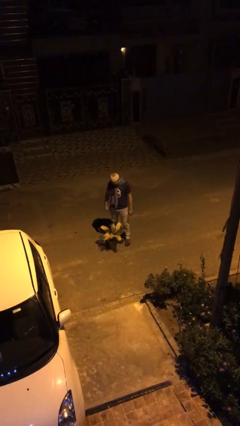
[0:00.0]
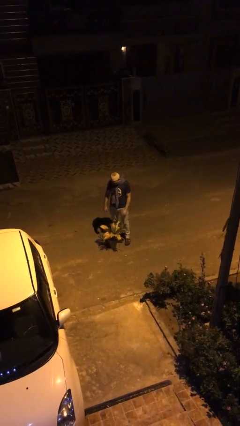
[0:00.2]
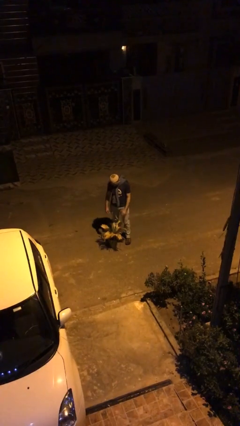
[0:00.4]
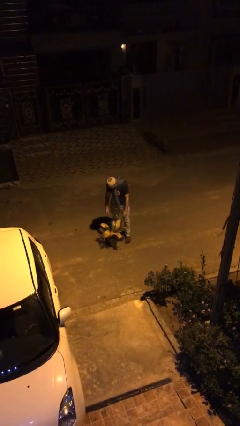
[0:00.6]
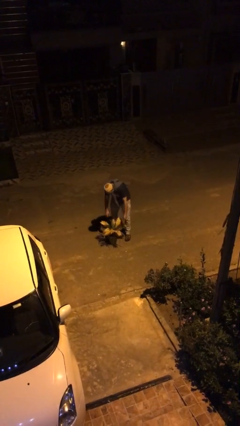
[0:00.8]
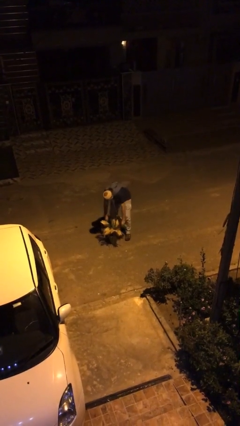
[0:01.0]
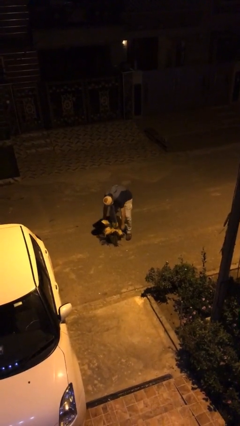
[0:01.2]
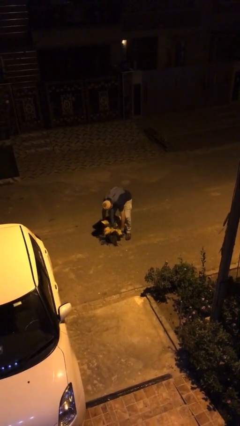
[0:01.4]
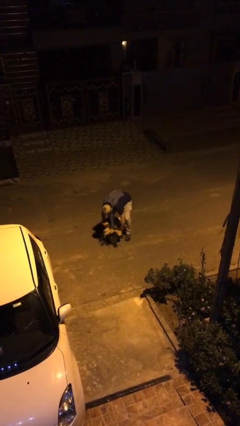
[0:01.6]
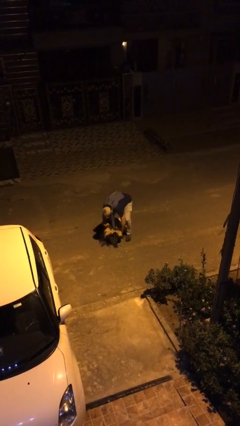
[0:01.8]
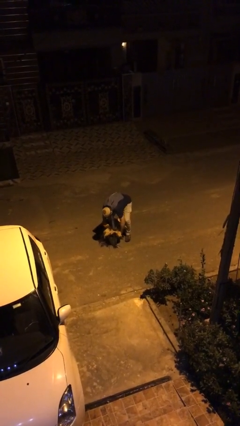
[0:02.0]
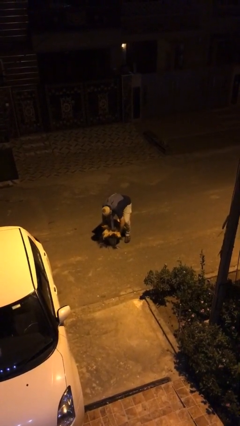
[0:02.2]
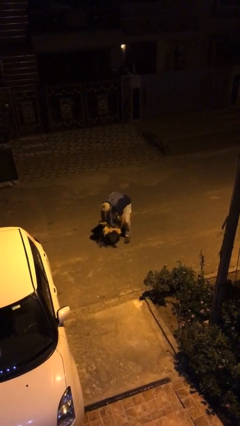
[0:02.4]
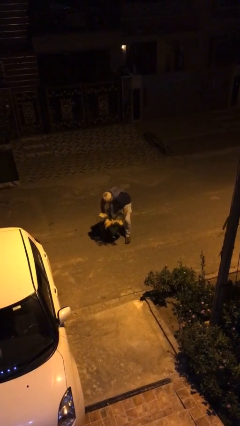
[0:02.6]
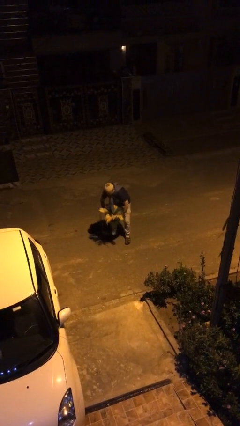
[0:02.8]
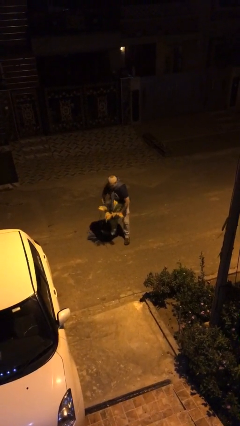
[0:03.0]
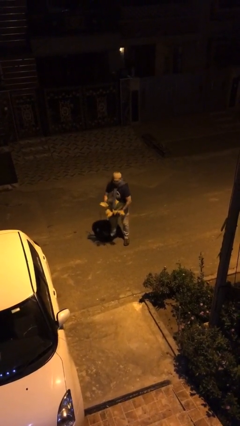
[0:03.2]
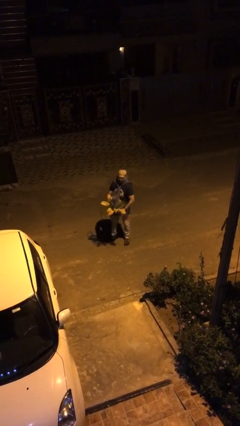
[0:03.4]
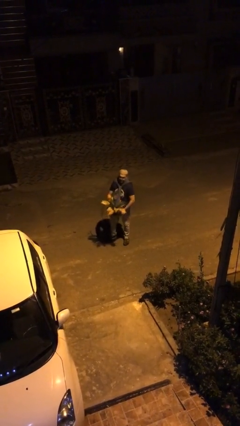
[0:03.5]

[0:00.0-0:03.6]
person picks up object from floor

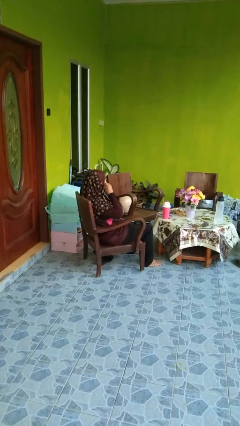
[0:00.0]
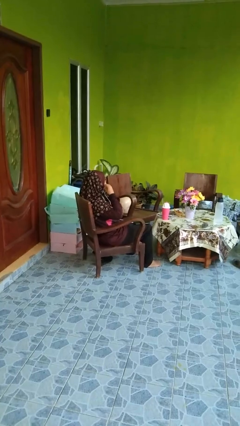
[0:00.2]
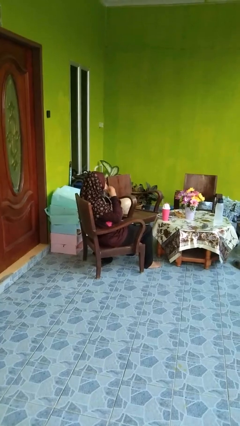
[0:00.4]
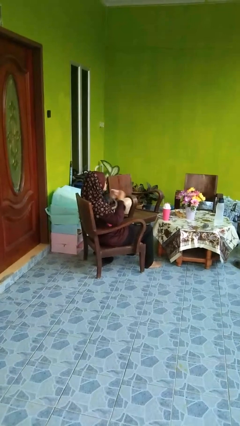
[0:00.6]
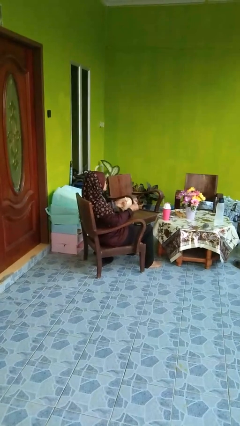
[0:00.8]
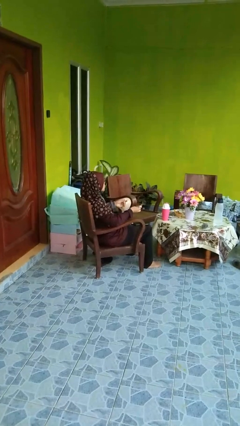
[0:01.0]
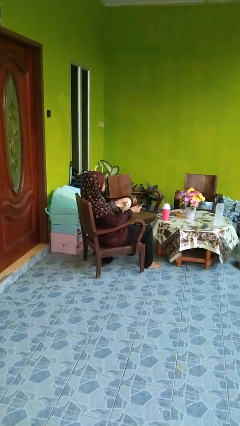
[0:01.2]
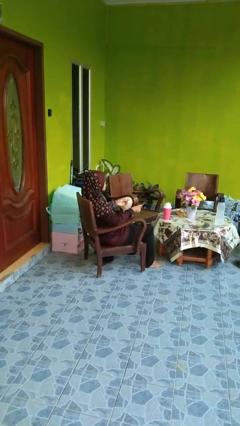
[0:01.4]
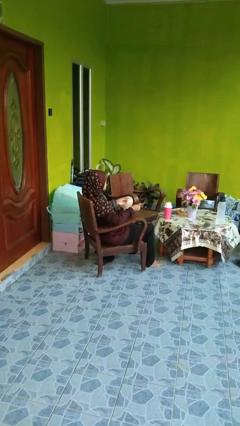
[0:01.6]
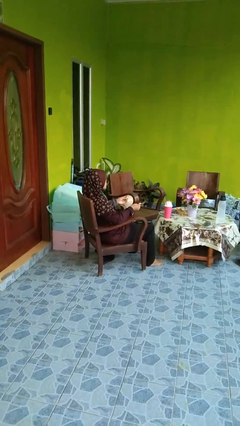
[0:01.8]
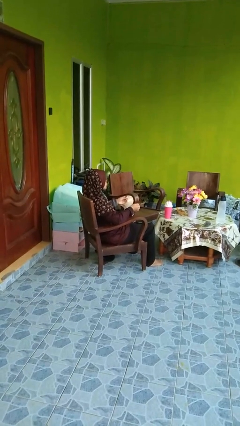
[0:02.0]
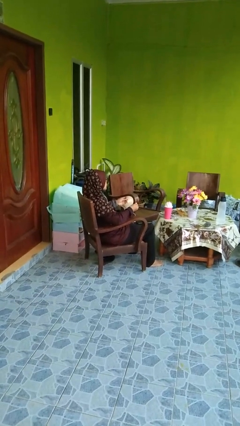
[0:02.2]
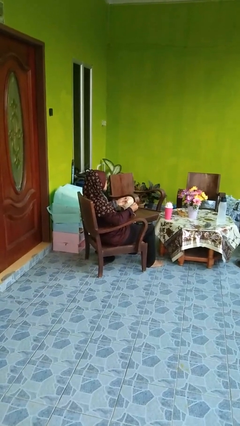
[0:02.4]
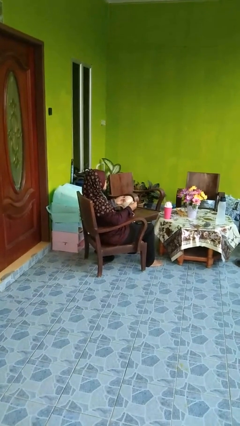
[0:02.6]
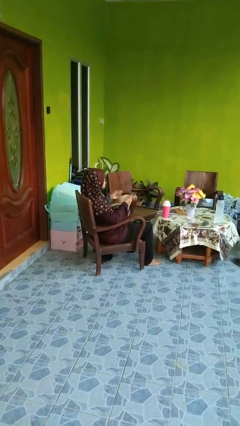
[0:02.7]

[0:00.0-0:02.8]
person takes off headphones

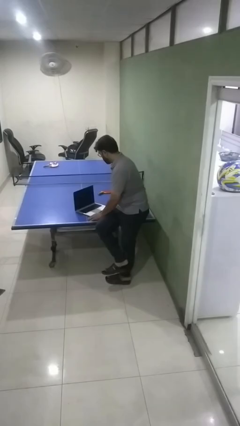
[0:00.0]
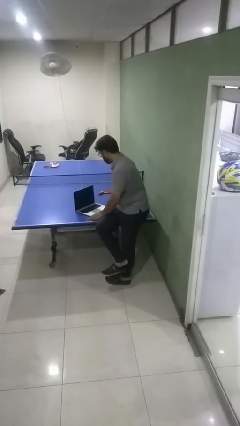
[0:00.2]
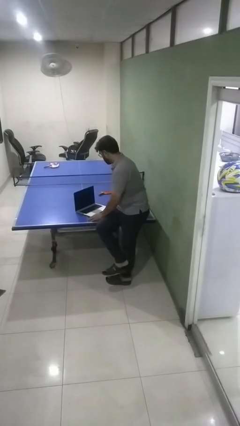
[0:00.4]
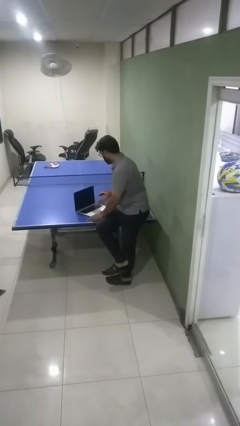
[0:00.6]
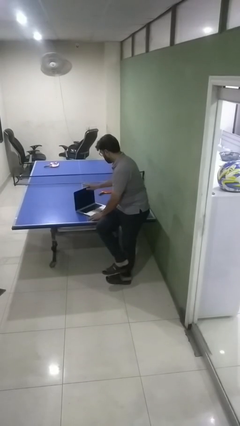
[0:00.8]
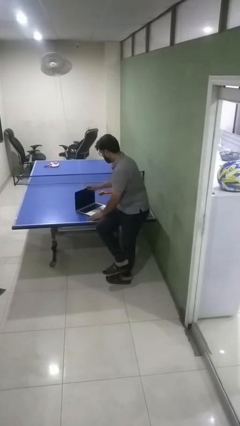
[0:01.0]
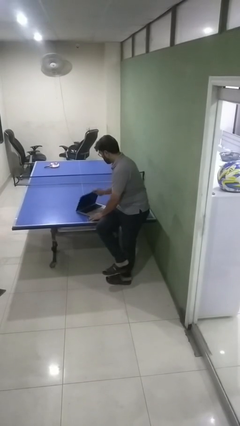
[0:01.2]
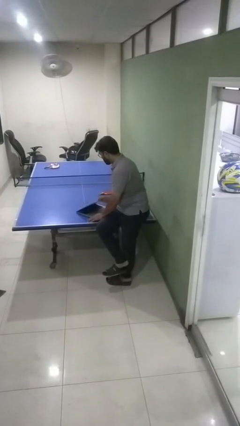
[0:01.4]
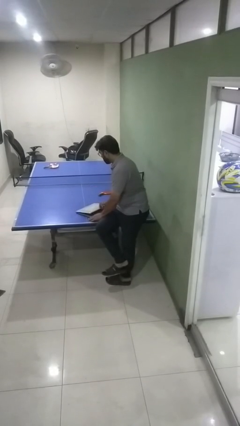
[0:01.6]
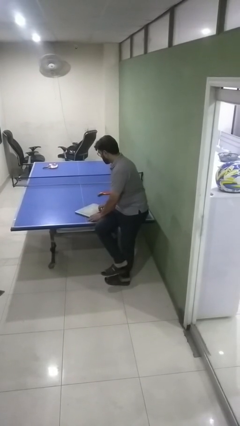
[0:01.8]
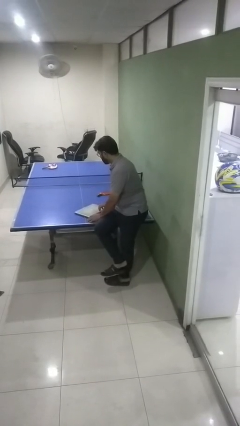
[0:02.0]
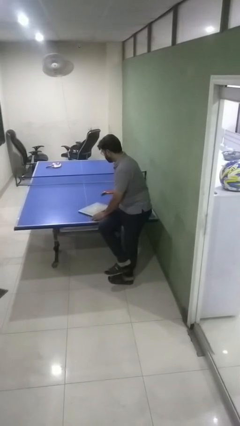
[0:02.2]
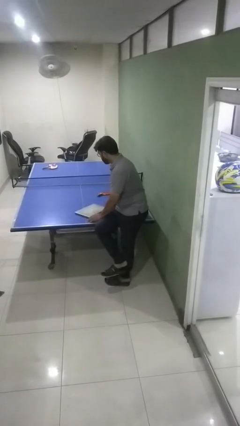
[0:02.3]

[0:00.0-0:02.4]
person closes laptop

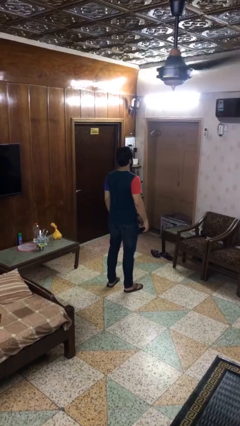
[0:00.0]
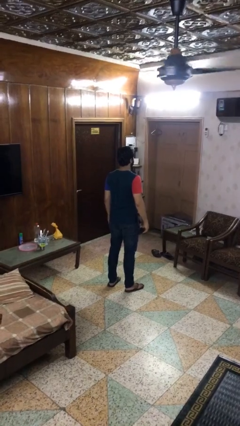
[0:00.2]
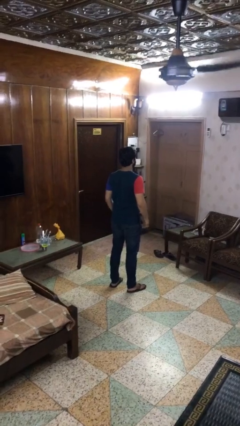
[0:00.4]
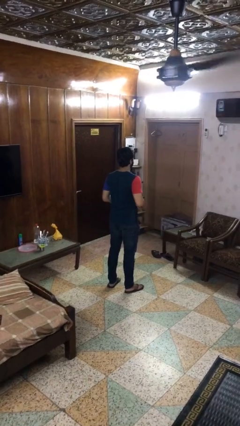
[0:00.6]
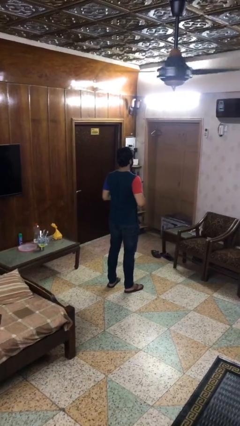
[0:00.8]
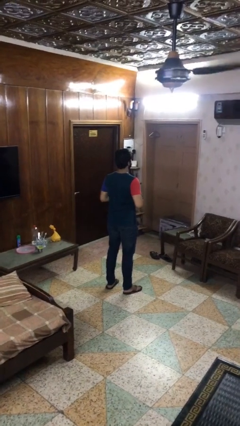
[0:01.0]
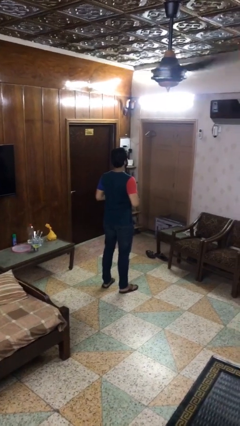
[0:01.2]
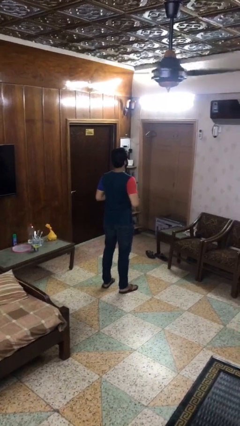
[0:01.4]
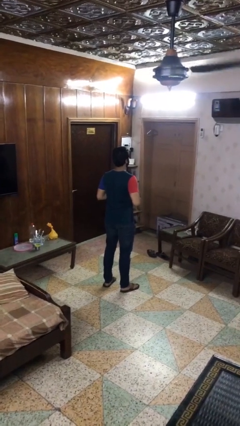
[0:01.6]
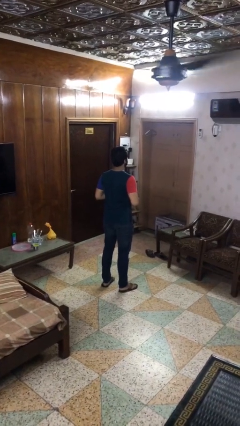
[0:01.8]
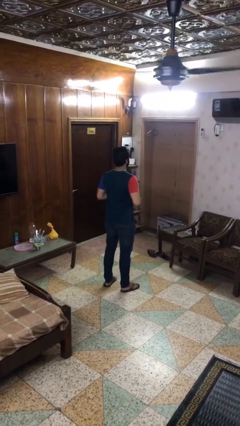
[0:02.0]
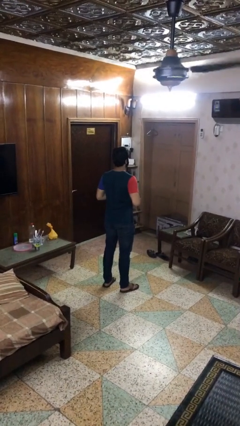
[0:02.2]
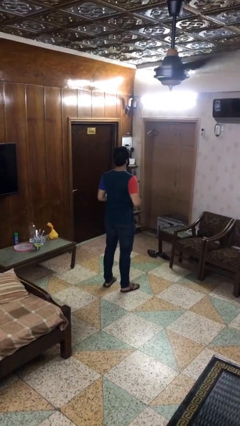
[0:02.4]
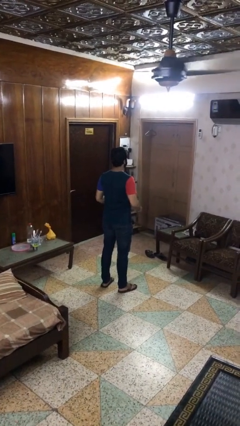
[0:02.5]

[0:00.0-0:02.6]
person buttons shirt

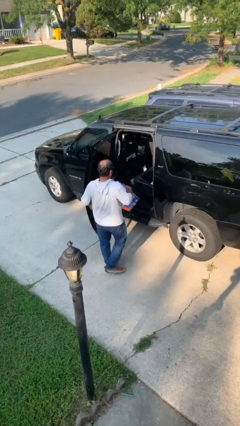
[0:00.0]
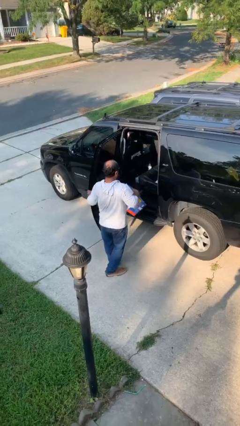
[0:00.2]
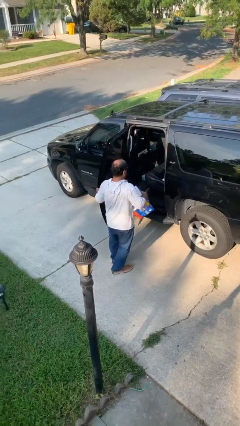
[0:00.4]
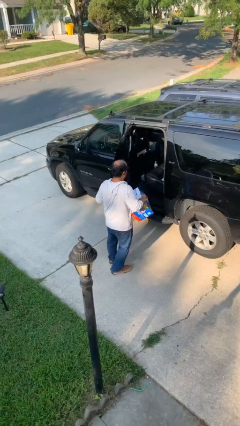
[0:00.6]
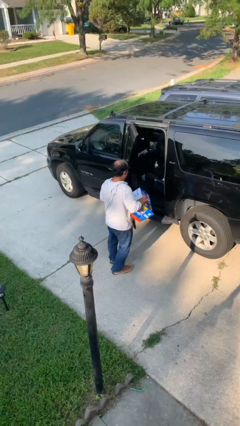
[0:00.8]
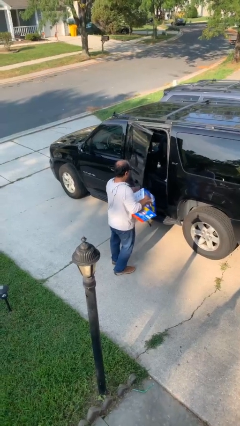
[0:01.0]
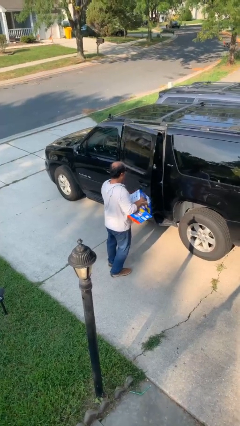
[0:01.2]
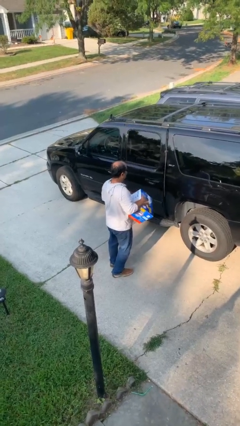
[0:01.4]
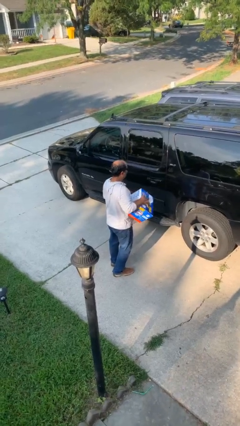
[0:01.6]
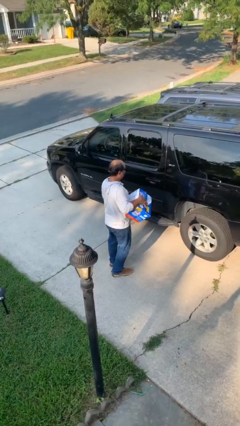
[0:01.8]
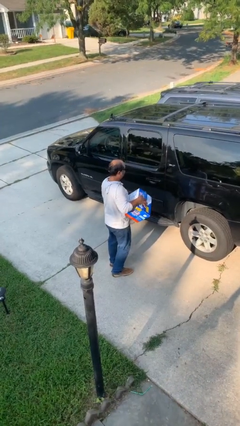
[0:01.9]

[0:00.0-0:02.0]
person closes car door

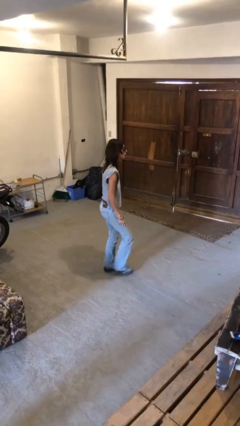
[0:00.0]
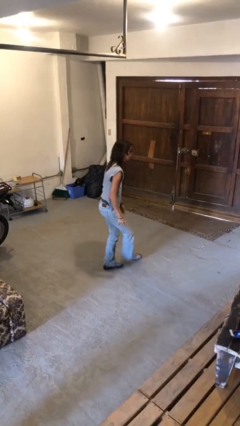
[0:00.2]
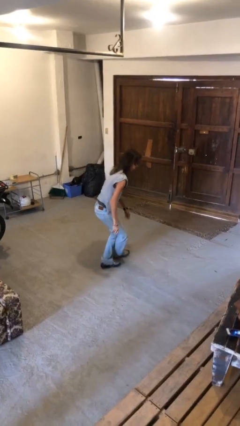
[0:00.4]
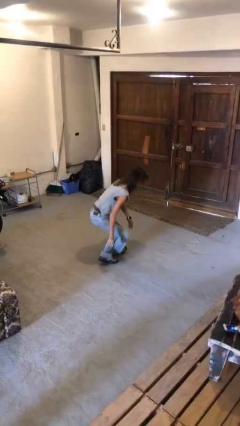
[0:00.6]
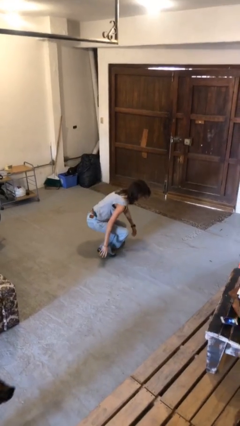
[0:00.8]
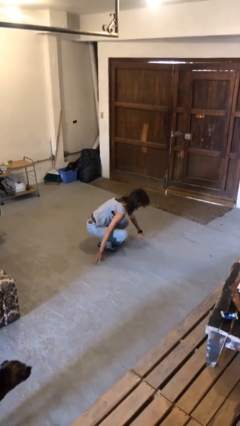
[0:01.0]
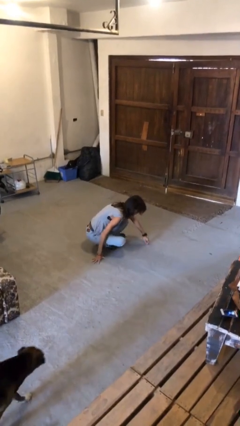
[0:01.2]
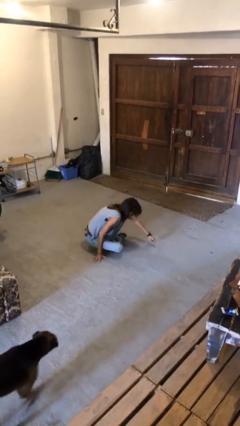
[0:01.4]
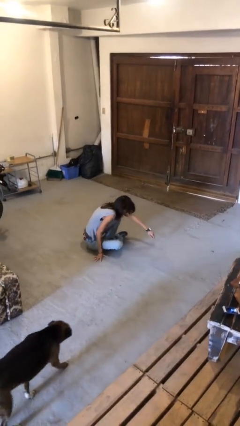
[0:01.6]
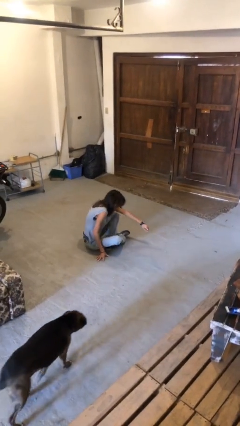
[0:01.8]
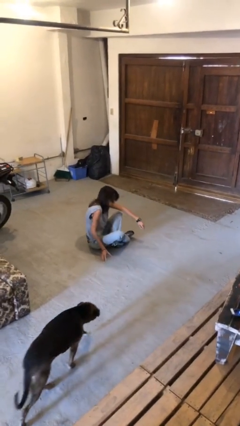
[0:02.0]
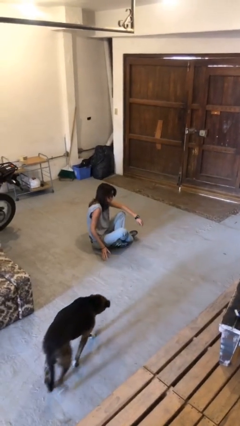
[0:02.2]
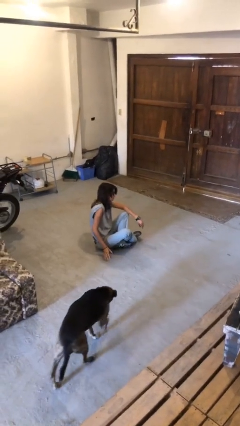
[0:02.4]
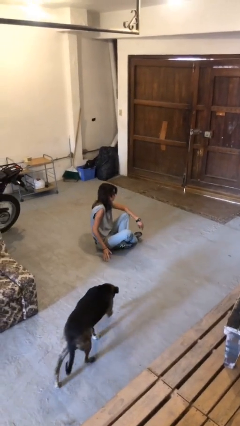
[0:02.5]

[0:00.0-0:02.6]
person sits crisscross

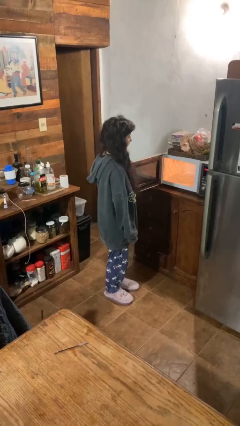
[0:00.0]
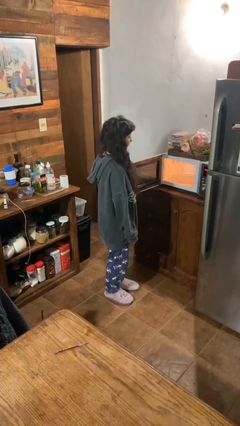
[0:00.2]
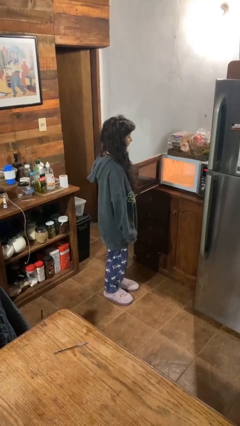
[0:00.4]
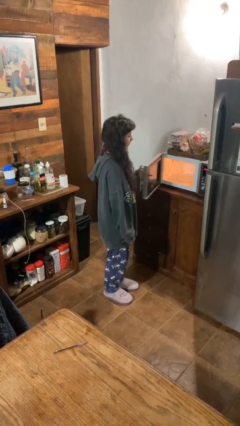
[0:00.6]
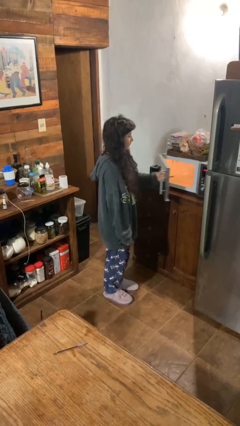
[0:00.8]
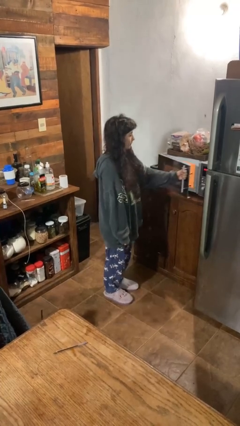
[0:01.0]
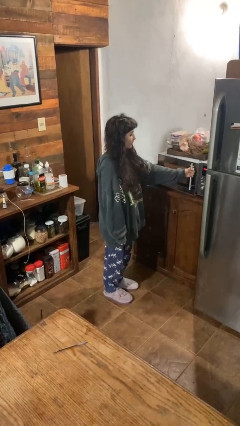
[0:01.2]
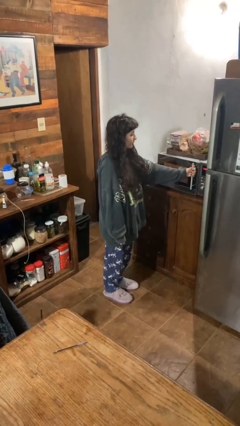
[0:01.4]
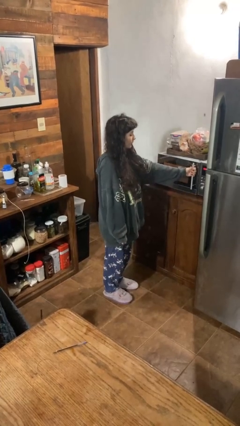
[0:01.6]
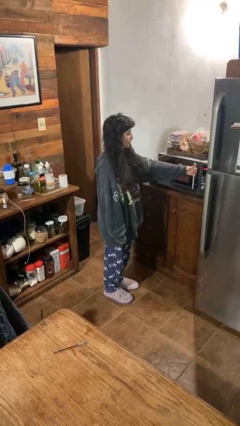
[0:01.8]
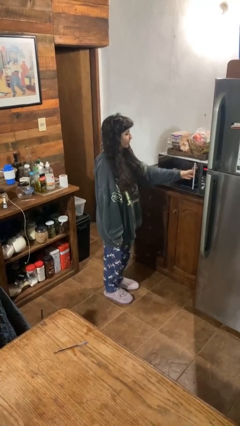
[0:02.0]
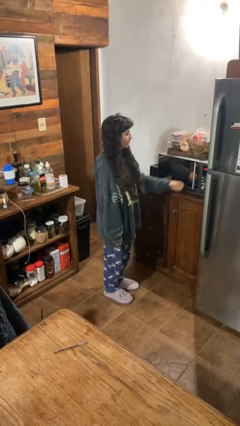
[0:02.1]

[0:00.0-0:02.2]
person closes microwave
